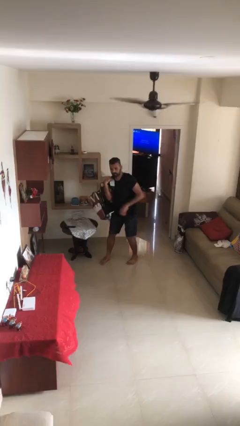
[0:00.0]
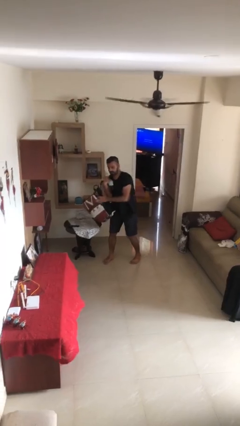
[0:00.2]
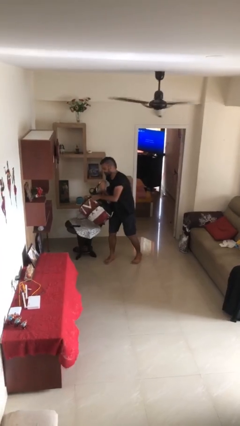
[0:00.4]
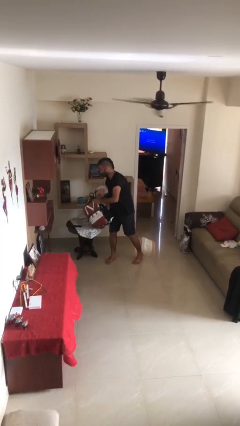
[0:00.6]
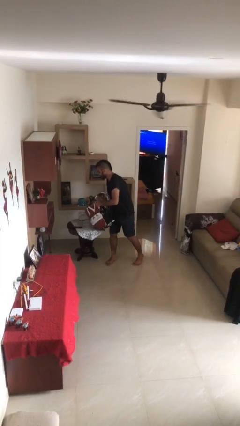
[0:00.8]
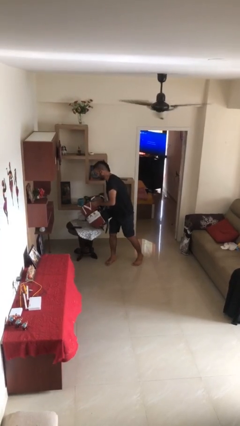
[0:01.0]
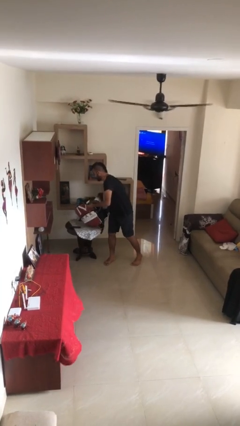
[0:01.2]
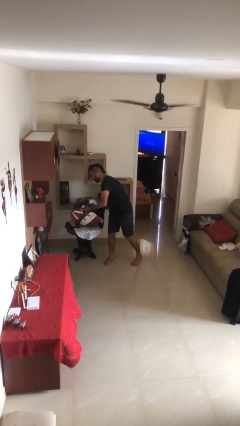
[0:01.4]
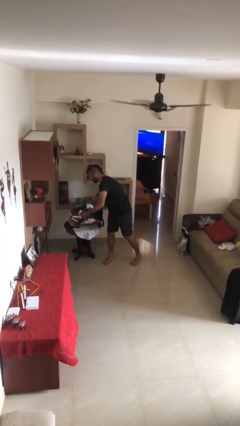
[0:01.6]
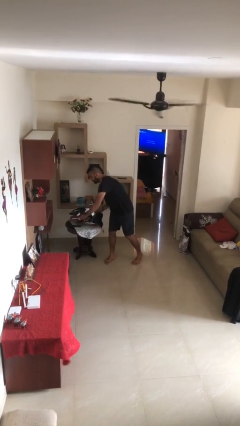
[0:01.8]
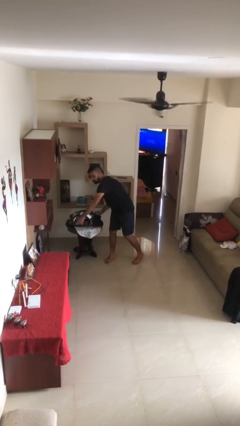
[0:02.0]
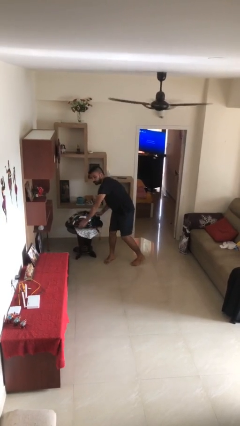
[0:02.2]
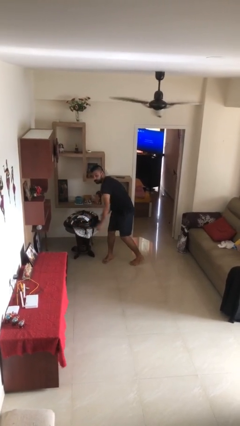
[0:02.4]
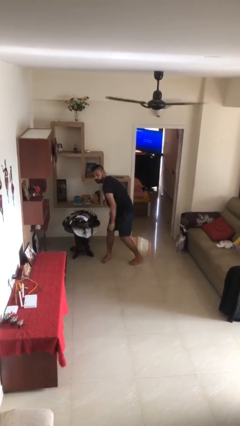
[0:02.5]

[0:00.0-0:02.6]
person puts down object on table

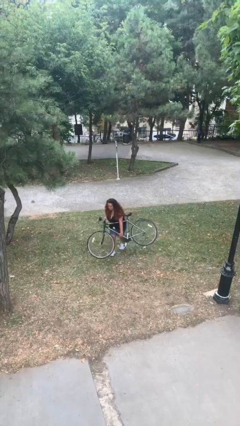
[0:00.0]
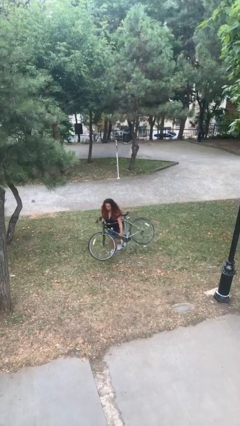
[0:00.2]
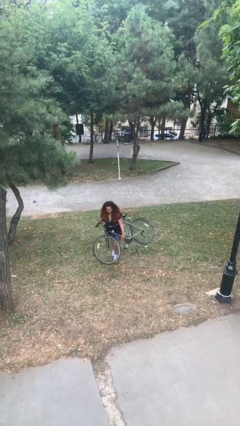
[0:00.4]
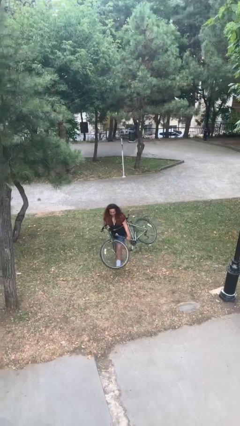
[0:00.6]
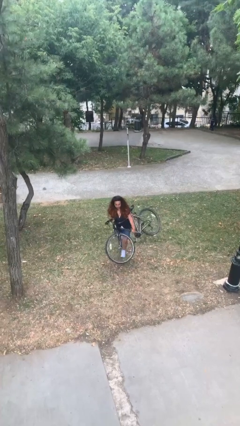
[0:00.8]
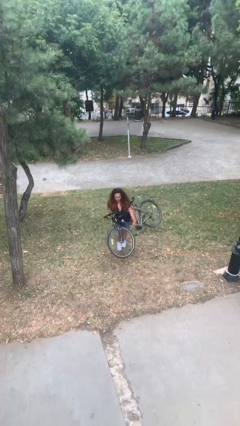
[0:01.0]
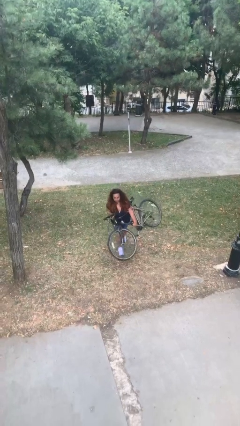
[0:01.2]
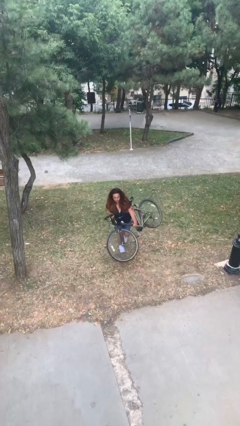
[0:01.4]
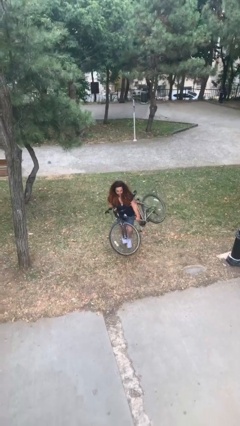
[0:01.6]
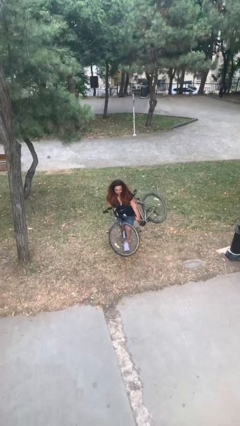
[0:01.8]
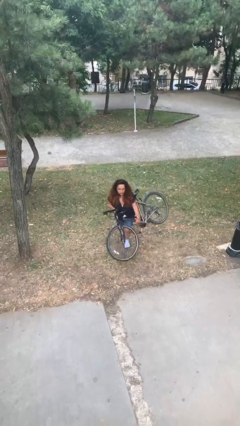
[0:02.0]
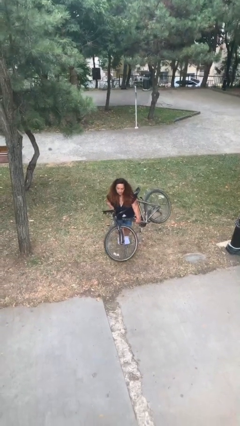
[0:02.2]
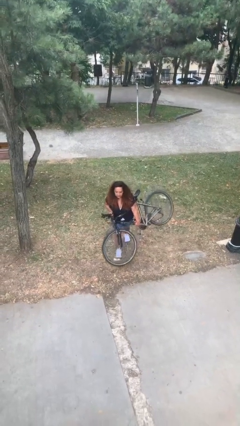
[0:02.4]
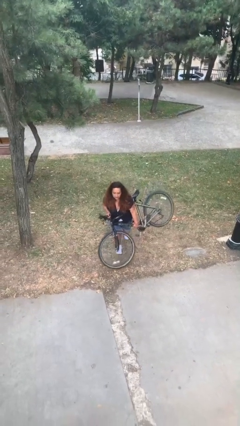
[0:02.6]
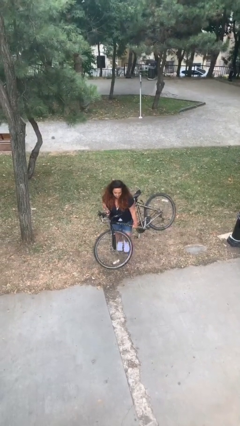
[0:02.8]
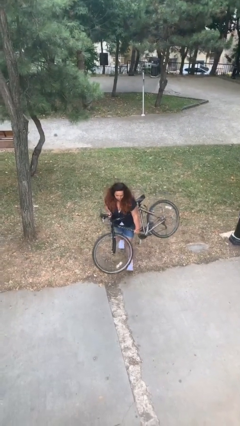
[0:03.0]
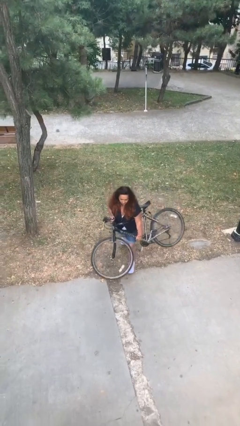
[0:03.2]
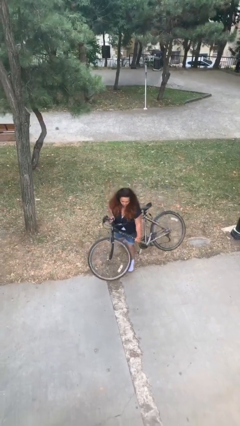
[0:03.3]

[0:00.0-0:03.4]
person carries heavy object

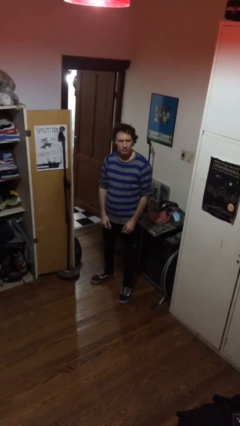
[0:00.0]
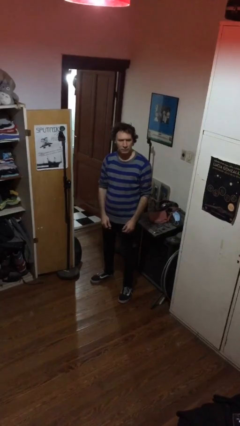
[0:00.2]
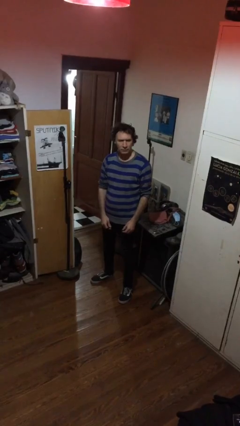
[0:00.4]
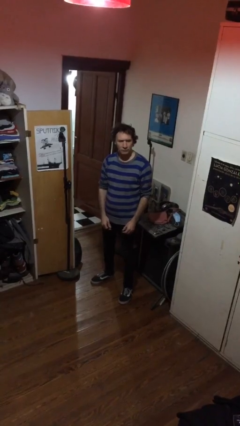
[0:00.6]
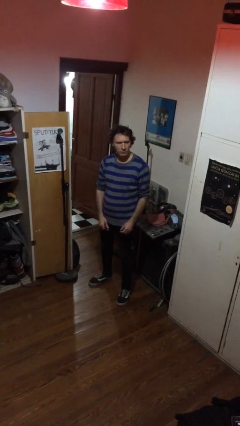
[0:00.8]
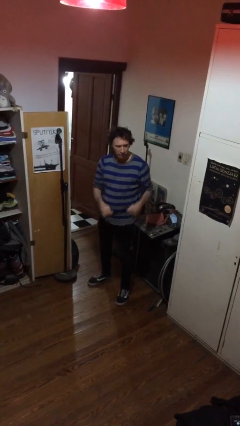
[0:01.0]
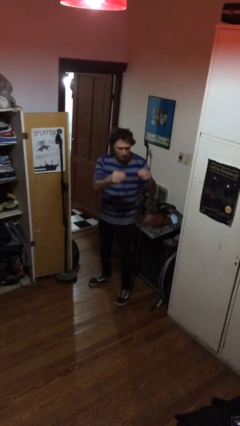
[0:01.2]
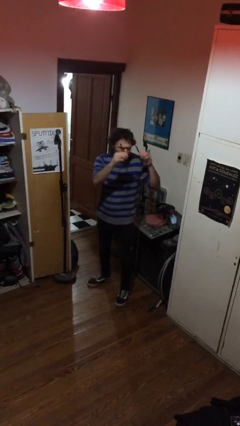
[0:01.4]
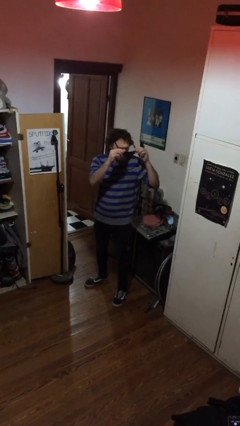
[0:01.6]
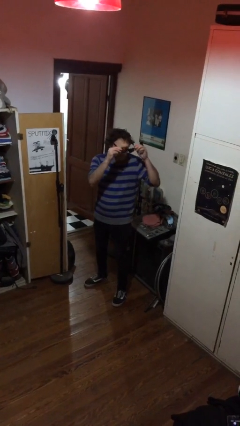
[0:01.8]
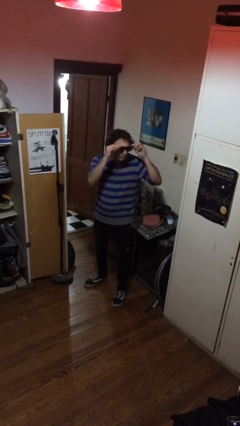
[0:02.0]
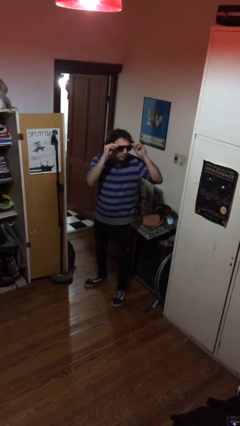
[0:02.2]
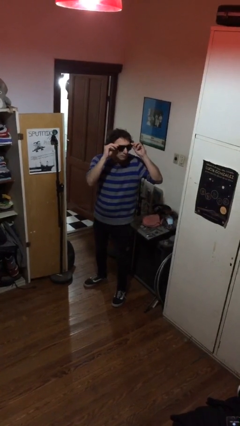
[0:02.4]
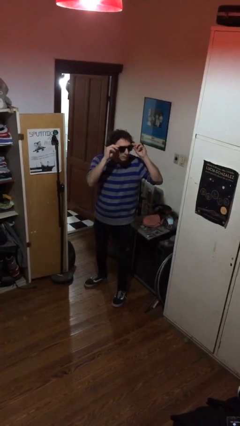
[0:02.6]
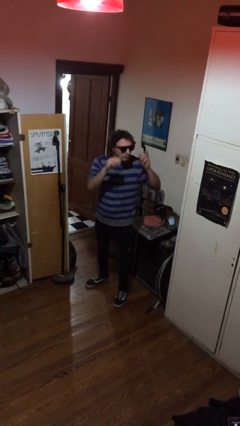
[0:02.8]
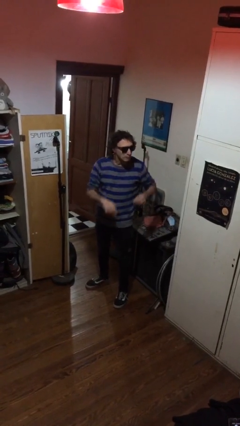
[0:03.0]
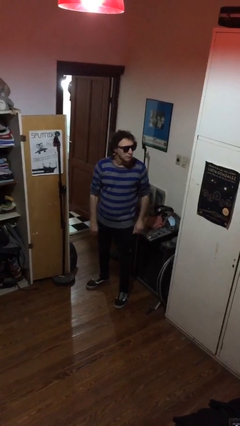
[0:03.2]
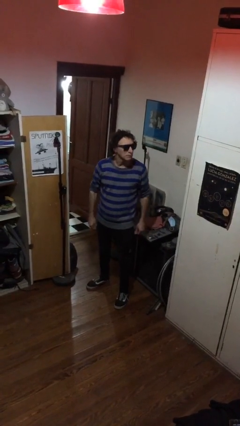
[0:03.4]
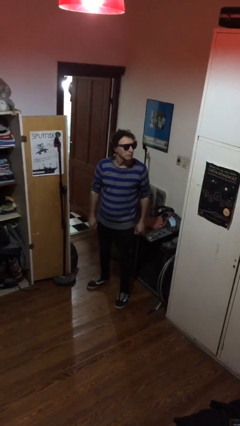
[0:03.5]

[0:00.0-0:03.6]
person puts on sunglasses

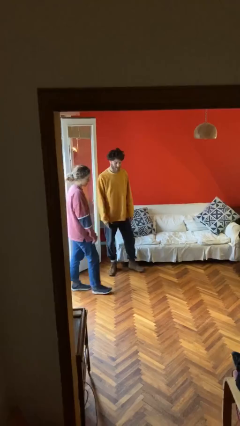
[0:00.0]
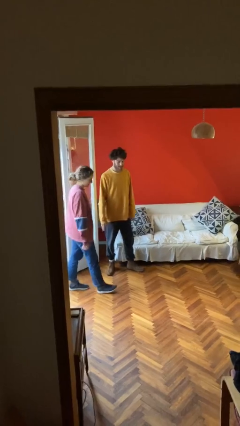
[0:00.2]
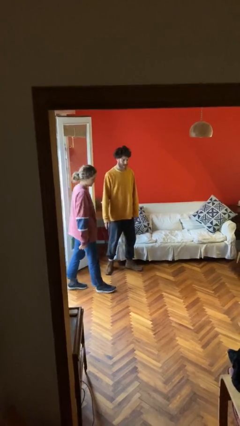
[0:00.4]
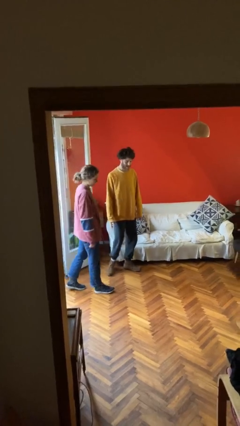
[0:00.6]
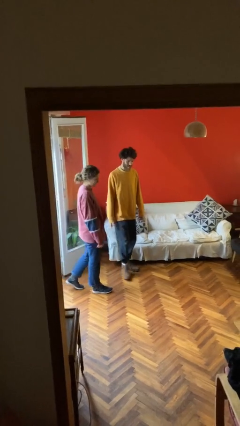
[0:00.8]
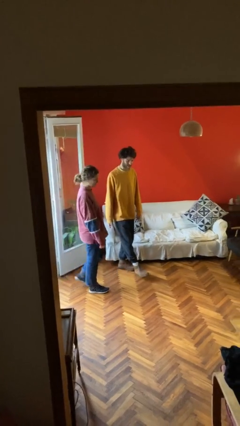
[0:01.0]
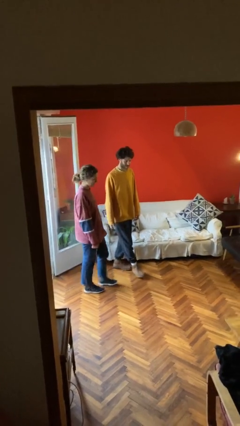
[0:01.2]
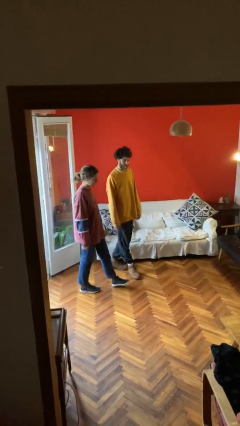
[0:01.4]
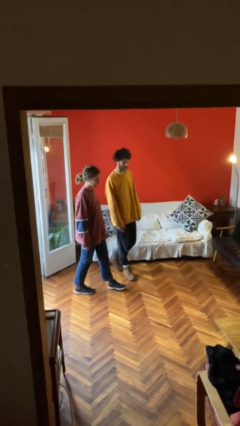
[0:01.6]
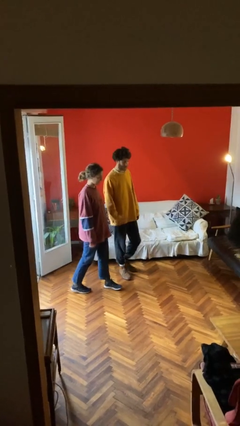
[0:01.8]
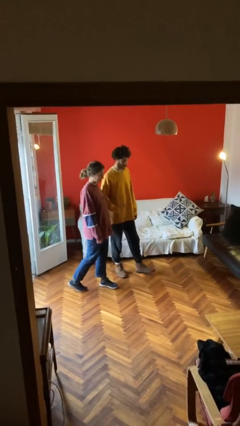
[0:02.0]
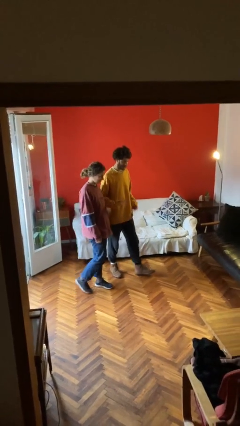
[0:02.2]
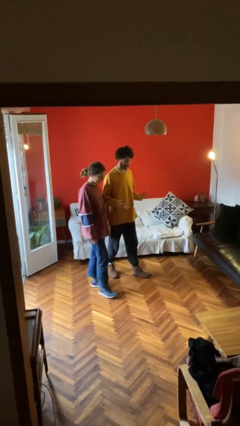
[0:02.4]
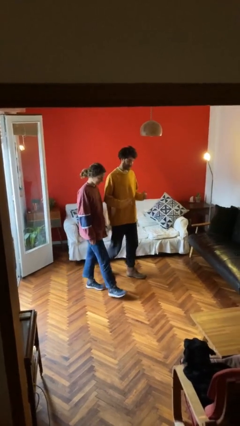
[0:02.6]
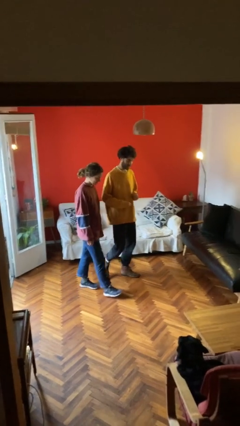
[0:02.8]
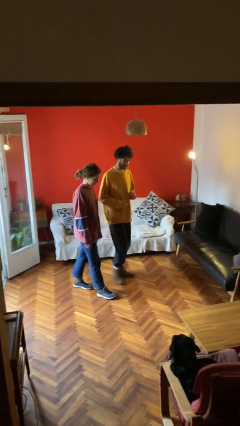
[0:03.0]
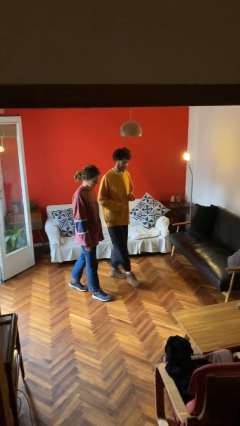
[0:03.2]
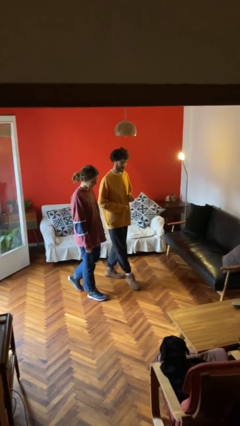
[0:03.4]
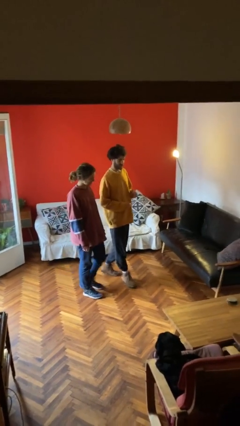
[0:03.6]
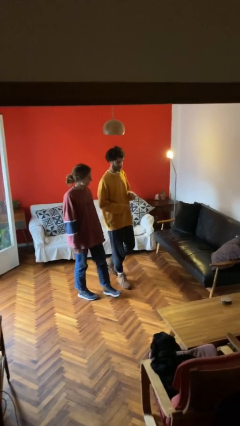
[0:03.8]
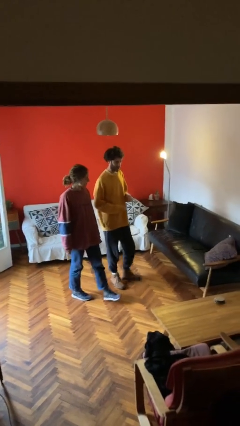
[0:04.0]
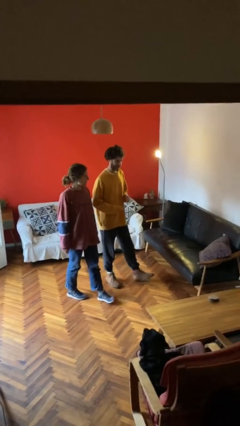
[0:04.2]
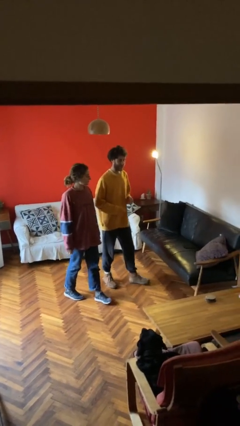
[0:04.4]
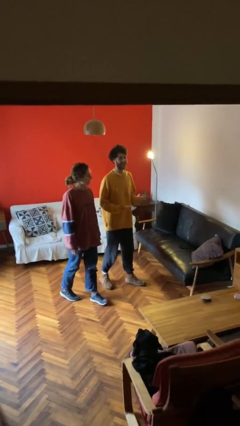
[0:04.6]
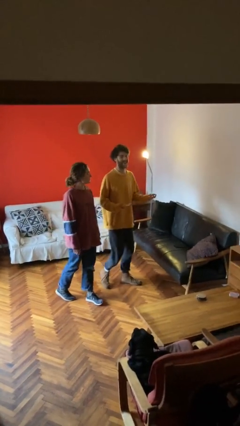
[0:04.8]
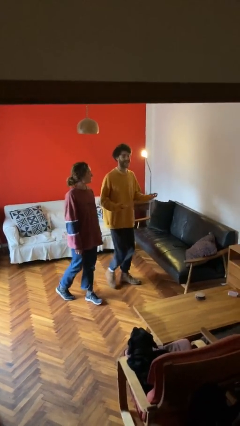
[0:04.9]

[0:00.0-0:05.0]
person talks to person

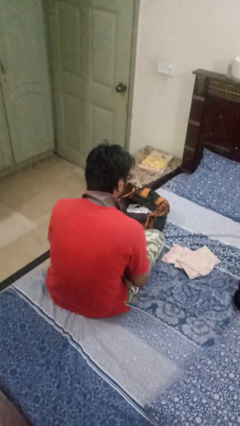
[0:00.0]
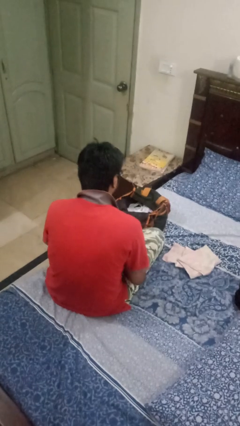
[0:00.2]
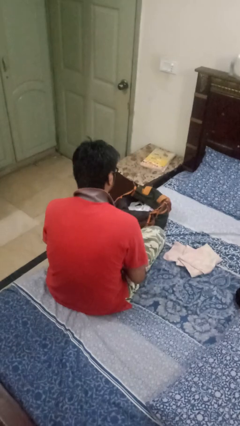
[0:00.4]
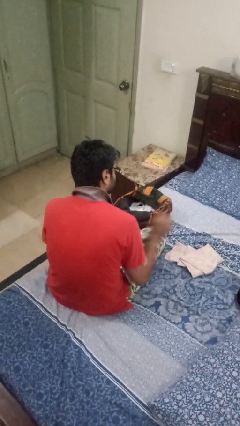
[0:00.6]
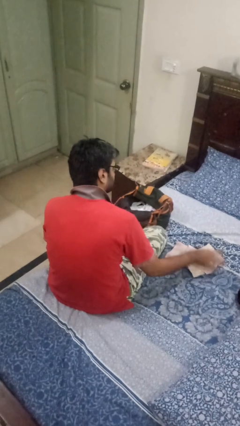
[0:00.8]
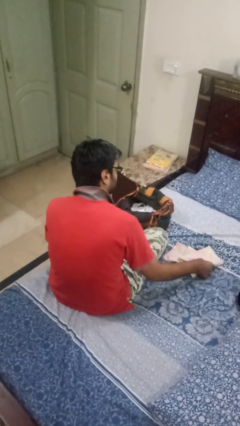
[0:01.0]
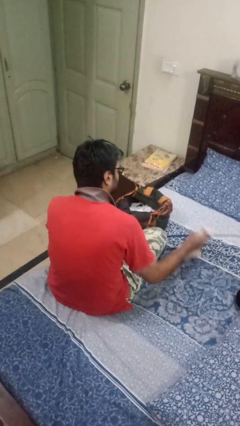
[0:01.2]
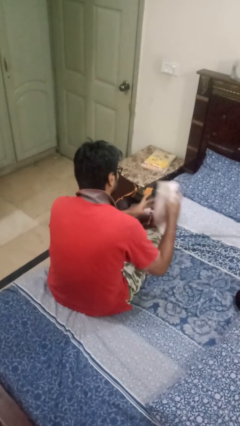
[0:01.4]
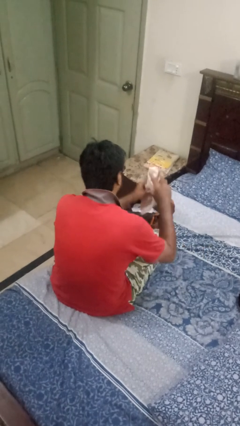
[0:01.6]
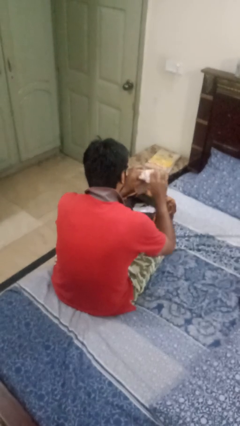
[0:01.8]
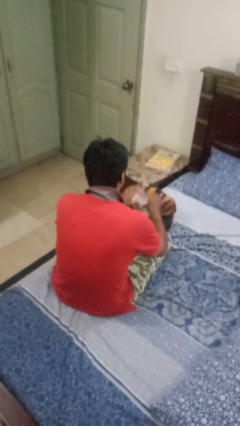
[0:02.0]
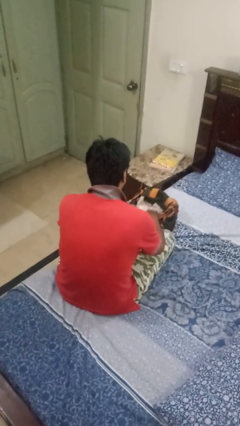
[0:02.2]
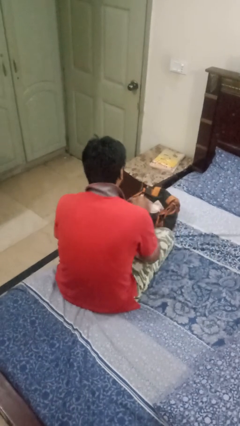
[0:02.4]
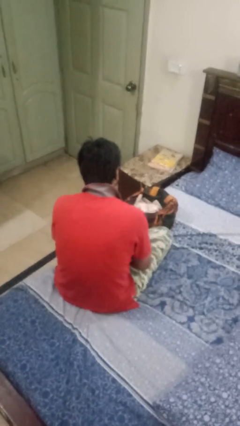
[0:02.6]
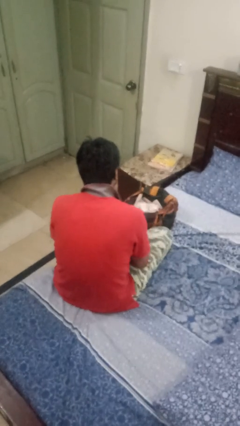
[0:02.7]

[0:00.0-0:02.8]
person puts object into bag
